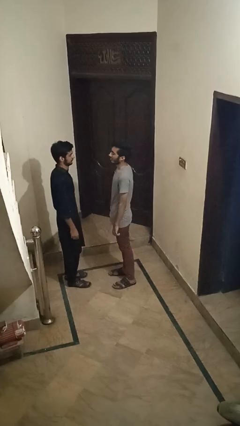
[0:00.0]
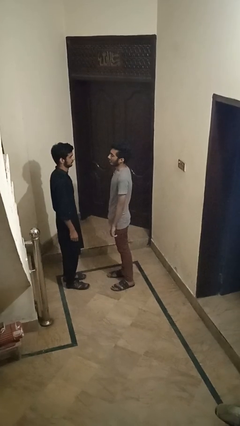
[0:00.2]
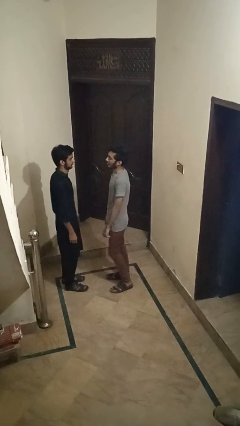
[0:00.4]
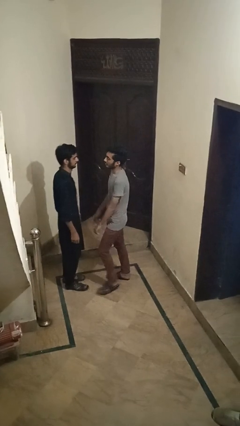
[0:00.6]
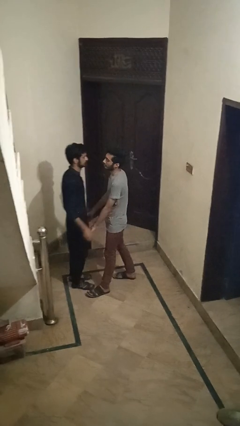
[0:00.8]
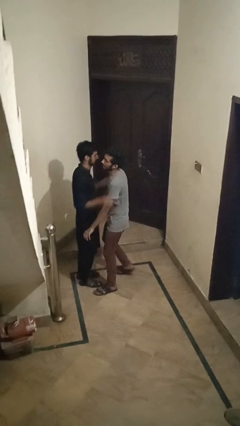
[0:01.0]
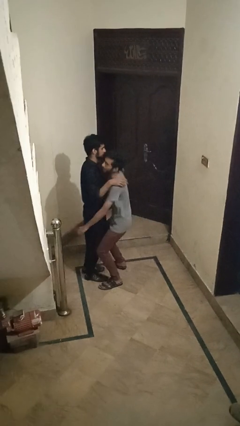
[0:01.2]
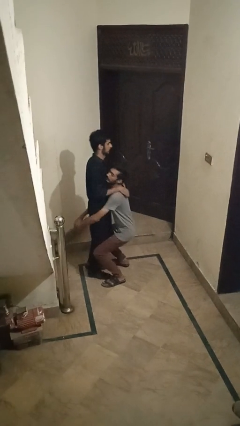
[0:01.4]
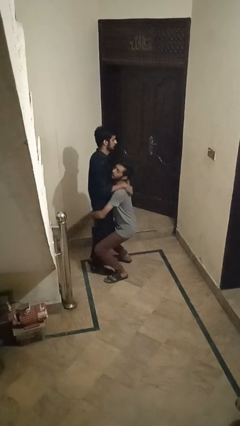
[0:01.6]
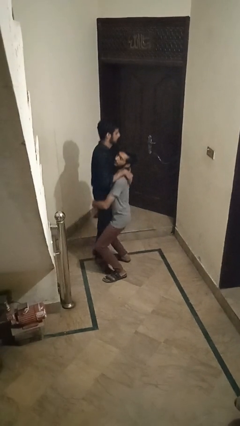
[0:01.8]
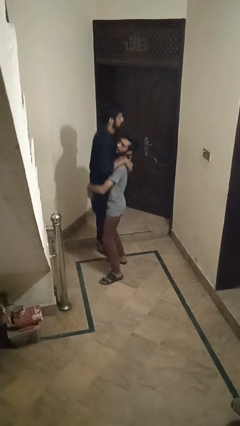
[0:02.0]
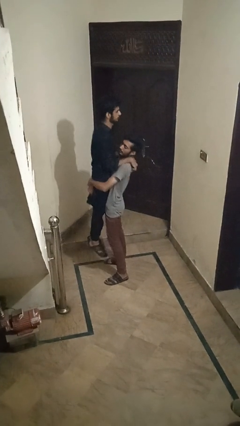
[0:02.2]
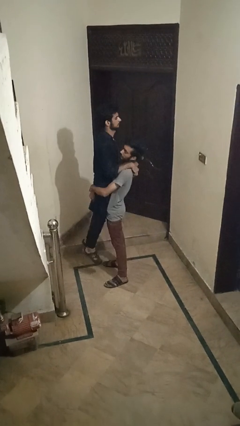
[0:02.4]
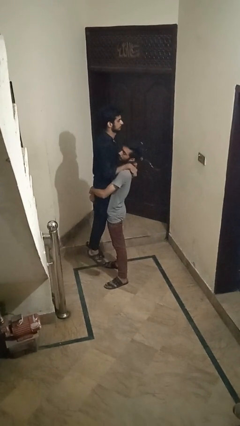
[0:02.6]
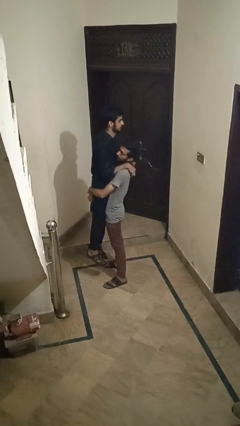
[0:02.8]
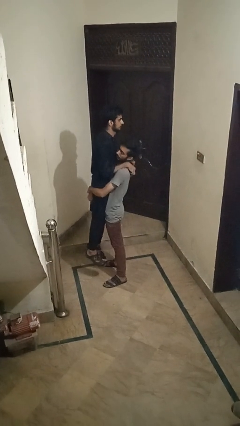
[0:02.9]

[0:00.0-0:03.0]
person picks up person

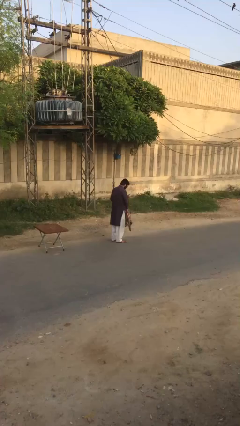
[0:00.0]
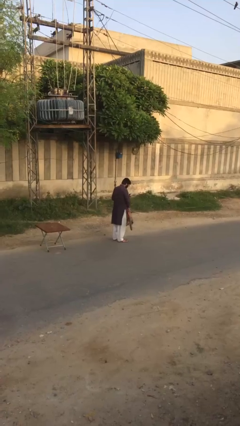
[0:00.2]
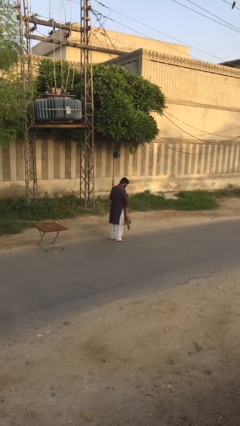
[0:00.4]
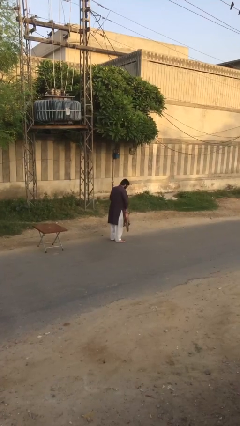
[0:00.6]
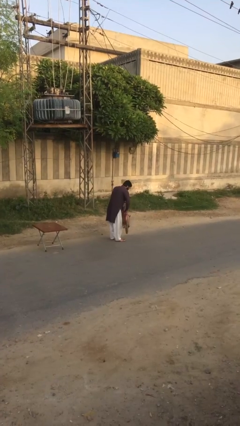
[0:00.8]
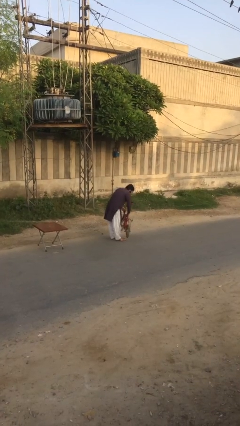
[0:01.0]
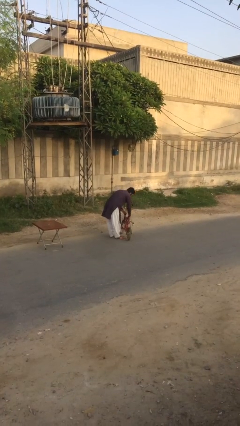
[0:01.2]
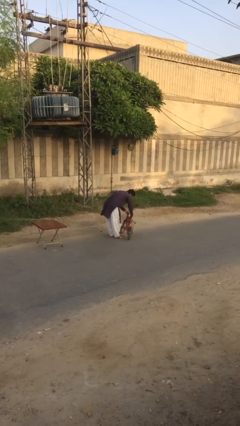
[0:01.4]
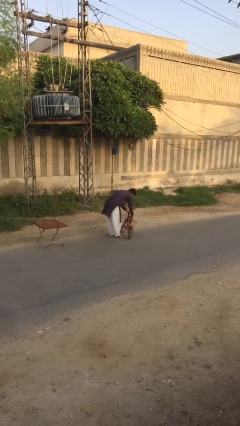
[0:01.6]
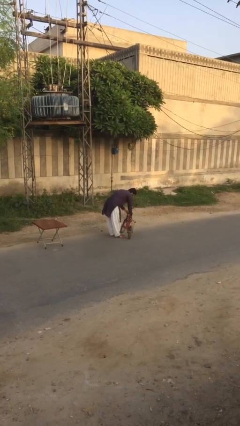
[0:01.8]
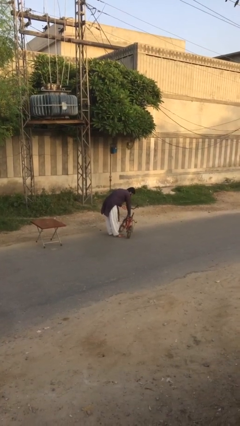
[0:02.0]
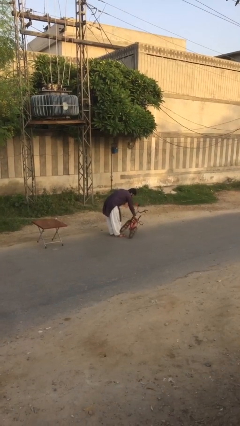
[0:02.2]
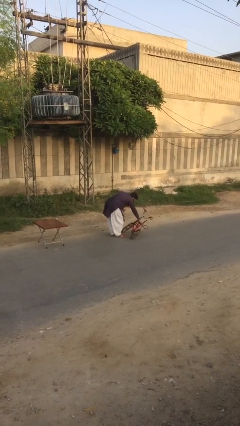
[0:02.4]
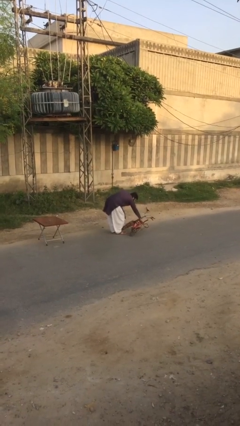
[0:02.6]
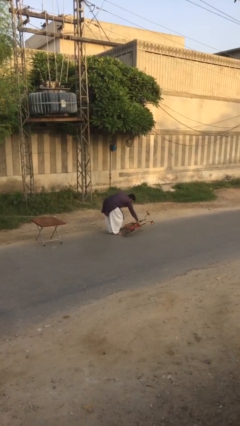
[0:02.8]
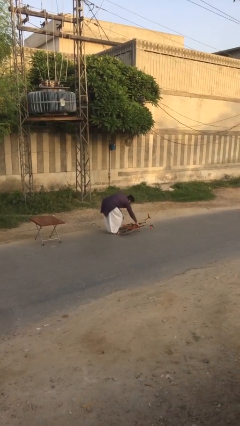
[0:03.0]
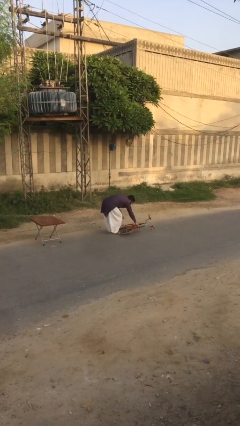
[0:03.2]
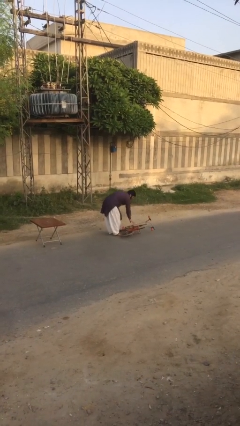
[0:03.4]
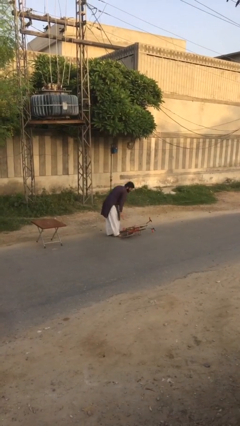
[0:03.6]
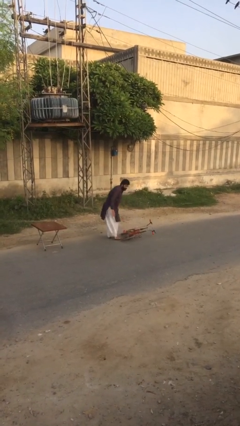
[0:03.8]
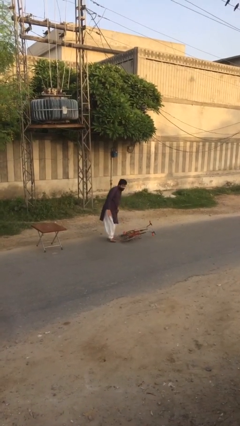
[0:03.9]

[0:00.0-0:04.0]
person puts down object on floor

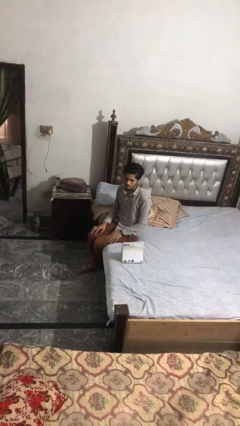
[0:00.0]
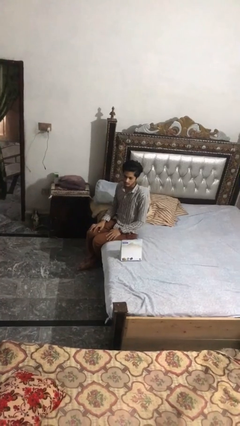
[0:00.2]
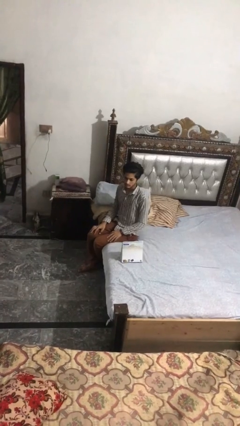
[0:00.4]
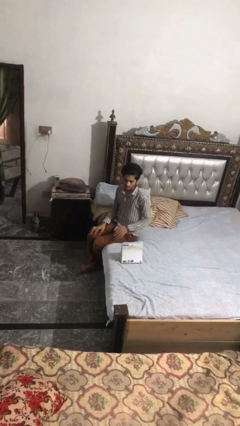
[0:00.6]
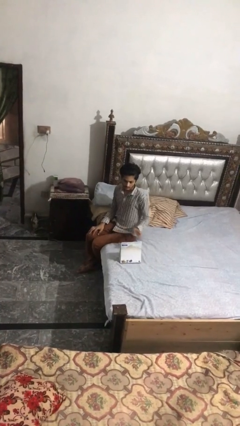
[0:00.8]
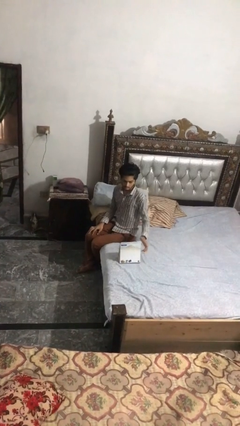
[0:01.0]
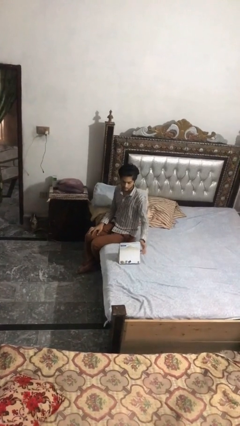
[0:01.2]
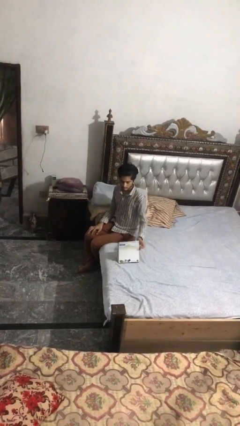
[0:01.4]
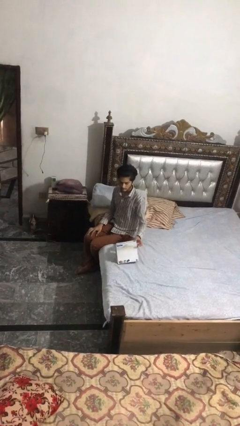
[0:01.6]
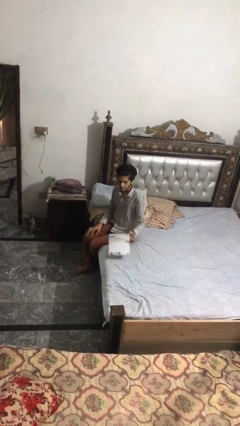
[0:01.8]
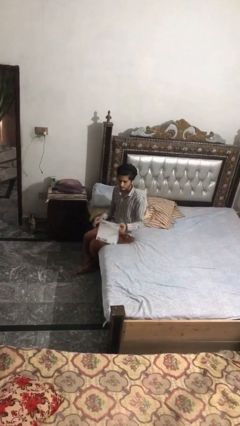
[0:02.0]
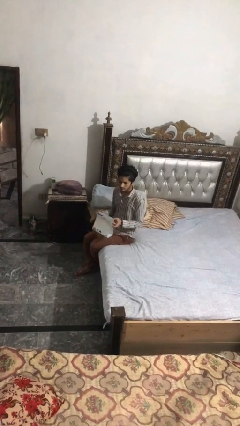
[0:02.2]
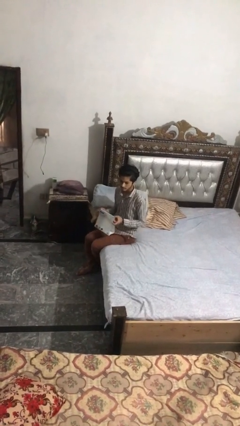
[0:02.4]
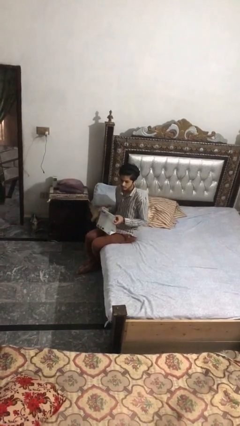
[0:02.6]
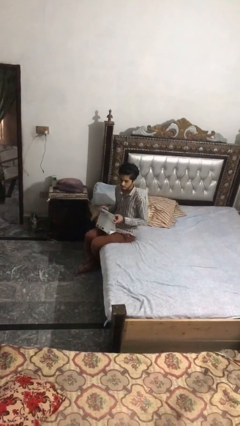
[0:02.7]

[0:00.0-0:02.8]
person picks up object from bed

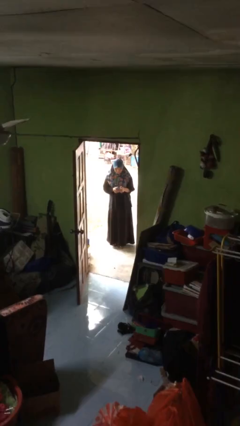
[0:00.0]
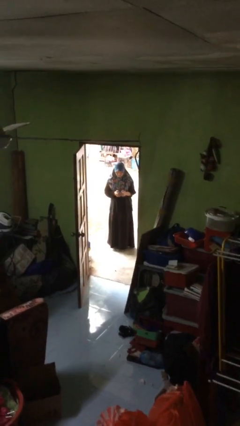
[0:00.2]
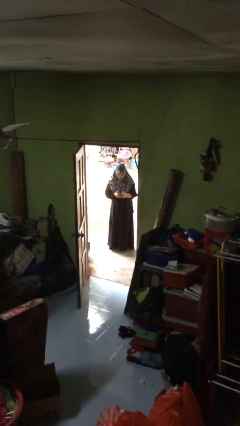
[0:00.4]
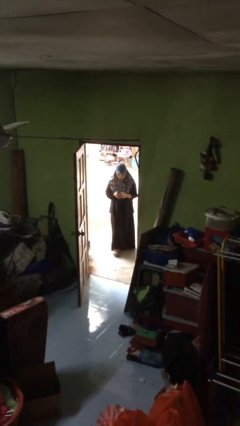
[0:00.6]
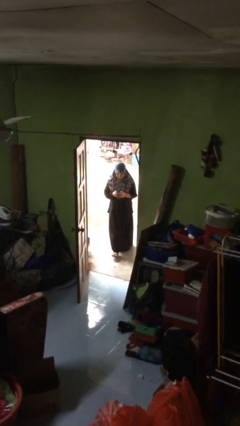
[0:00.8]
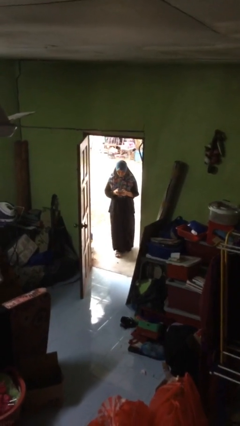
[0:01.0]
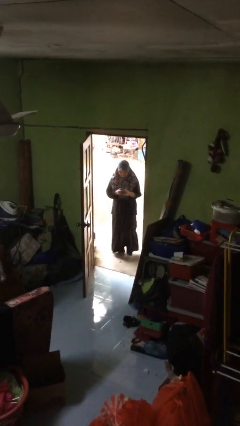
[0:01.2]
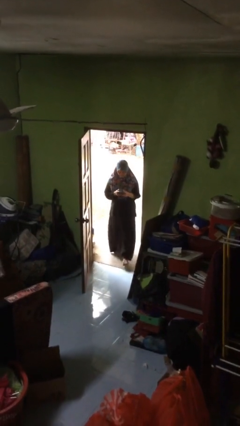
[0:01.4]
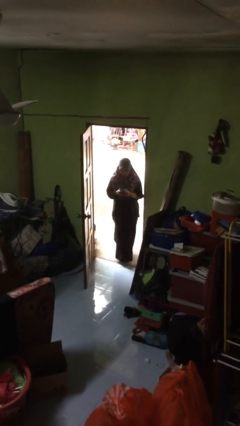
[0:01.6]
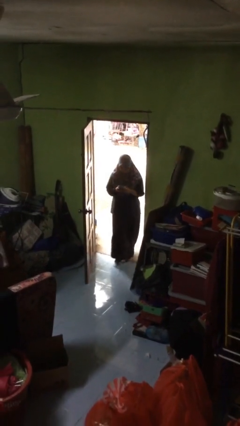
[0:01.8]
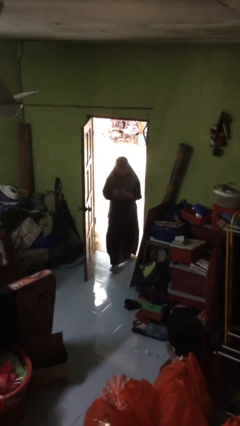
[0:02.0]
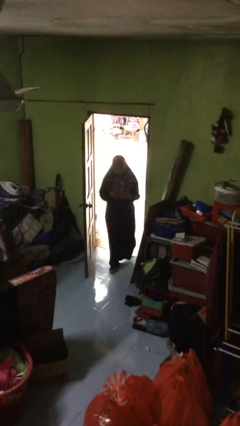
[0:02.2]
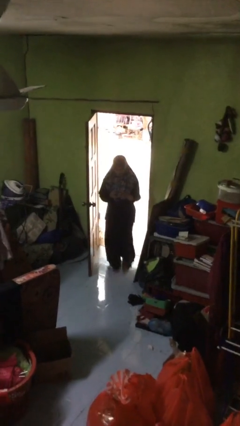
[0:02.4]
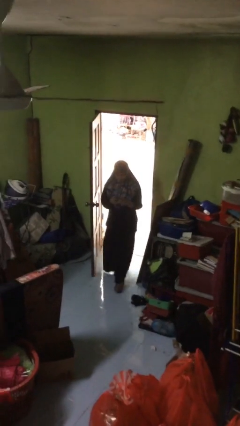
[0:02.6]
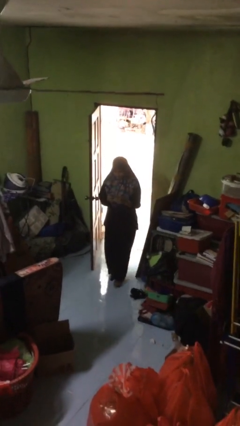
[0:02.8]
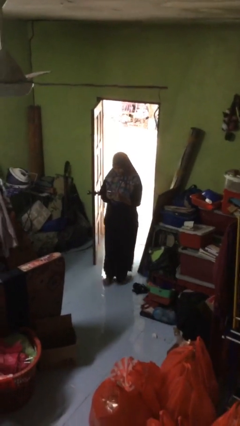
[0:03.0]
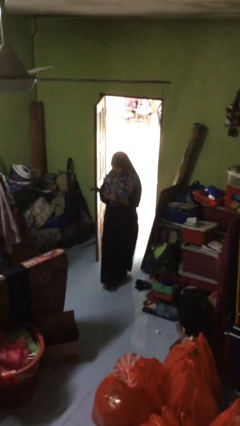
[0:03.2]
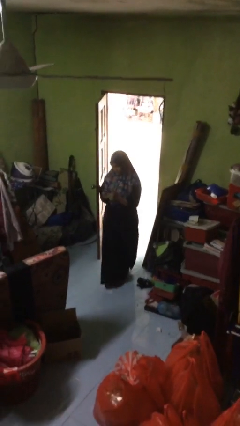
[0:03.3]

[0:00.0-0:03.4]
person enters scene through structure

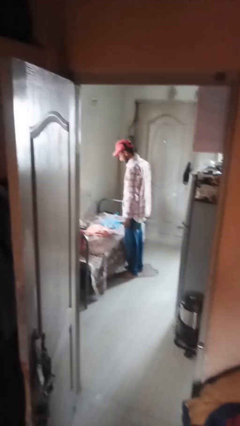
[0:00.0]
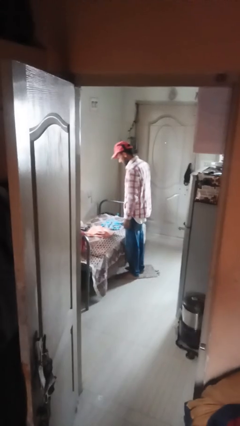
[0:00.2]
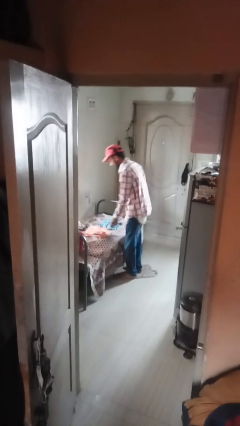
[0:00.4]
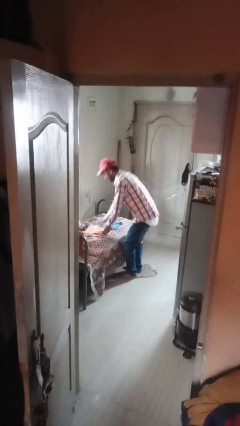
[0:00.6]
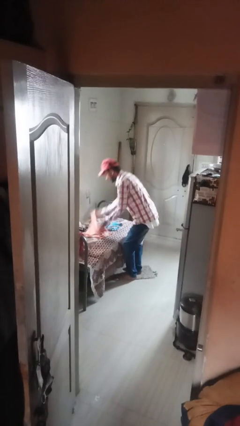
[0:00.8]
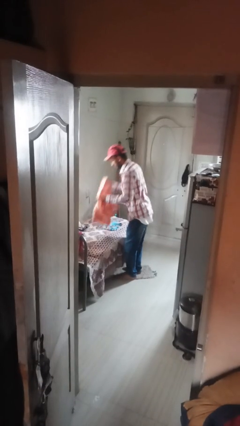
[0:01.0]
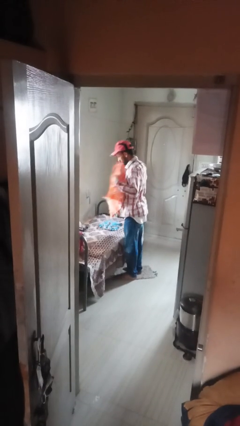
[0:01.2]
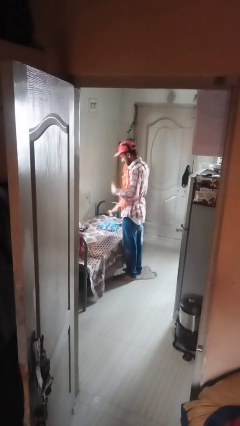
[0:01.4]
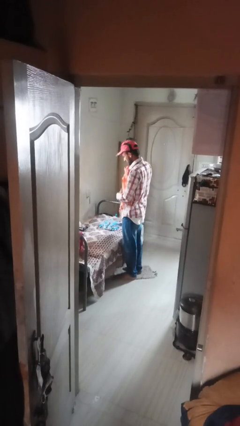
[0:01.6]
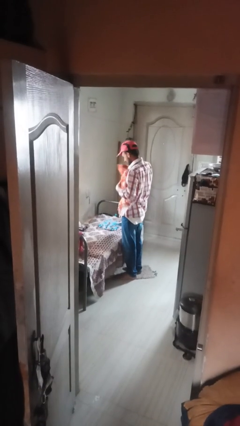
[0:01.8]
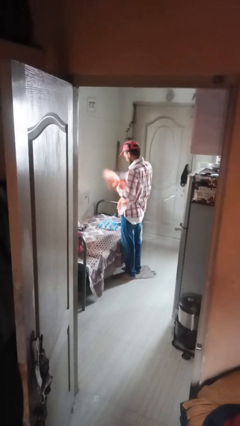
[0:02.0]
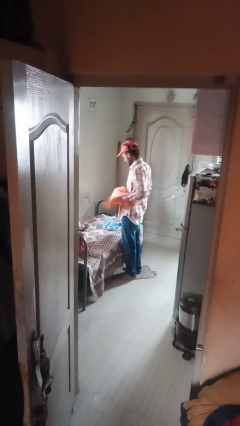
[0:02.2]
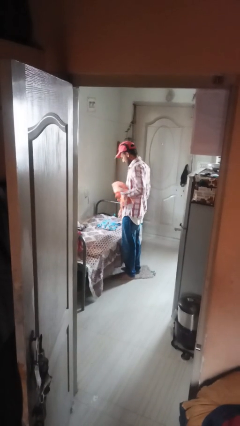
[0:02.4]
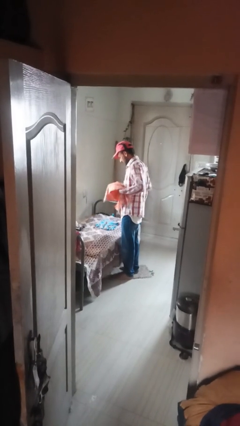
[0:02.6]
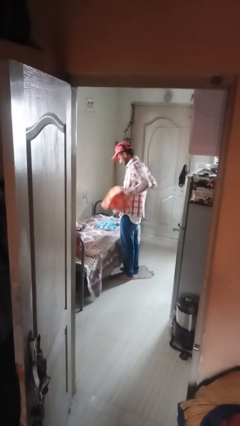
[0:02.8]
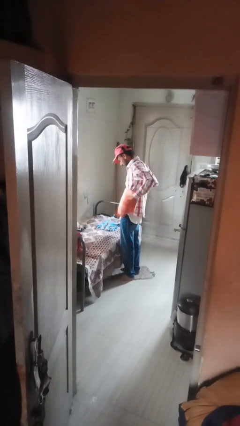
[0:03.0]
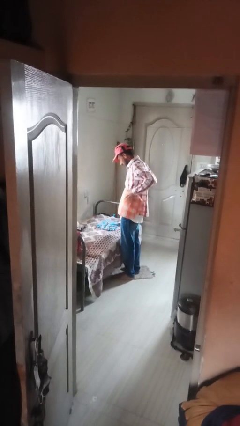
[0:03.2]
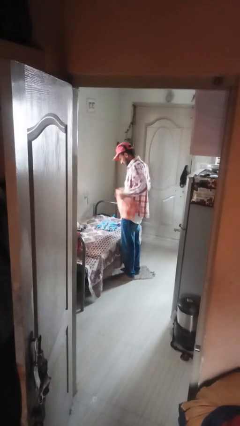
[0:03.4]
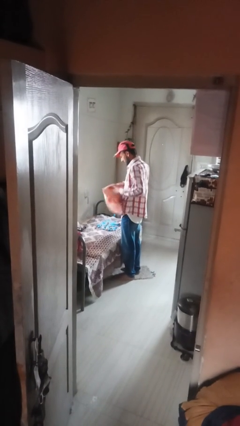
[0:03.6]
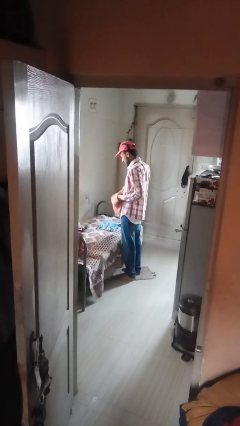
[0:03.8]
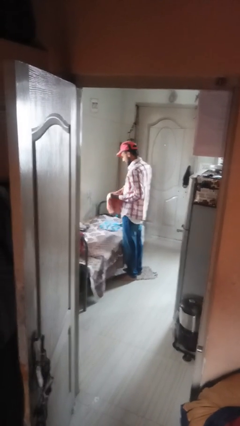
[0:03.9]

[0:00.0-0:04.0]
person folds towel

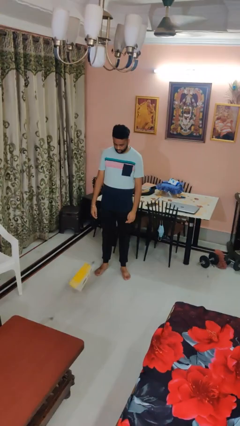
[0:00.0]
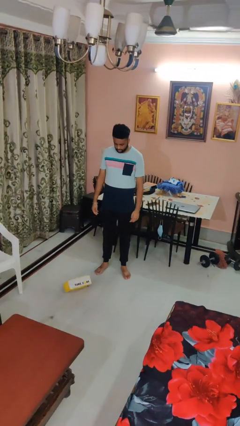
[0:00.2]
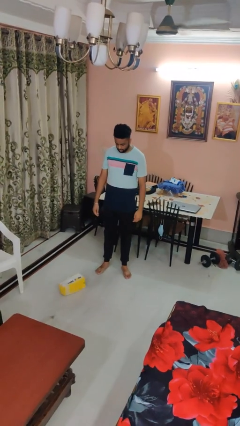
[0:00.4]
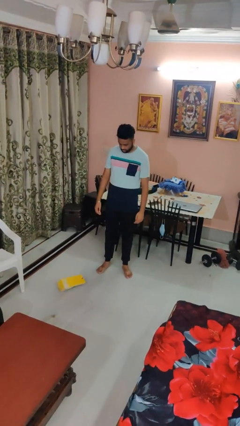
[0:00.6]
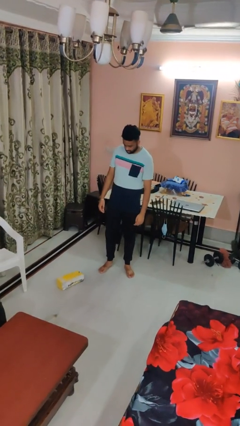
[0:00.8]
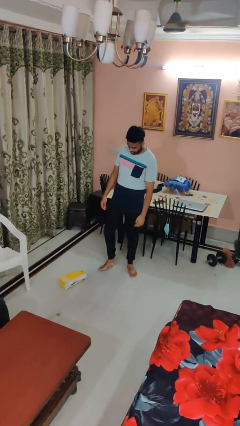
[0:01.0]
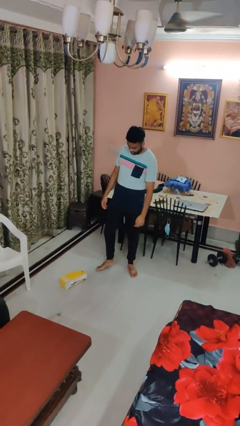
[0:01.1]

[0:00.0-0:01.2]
person drops object
